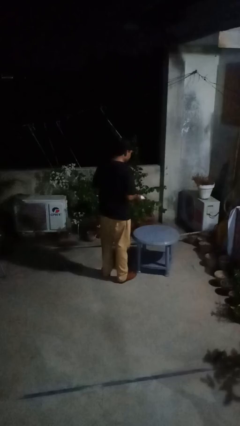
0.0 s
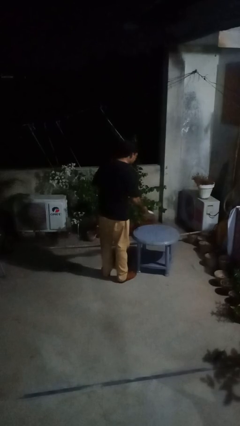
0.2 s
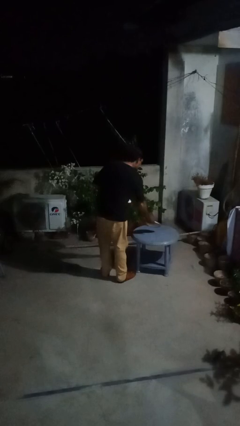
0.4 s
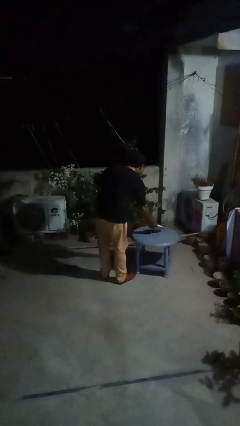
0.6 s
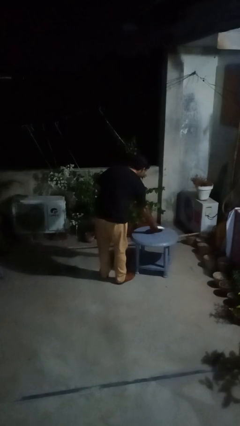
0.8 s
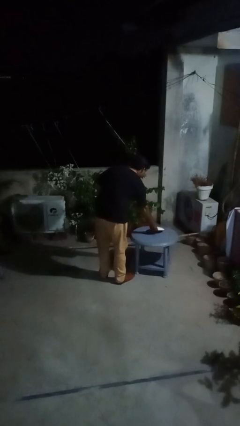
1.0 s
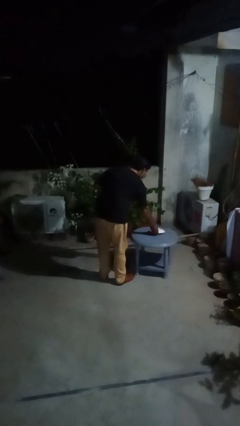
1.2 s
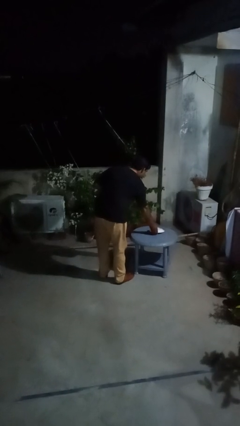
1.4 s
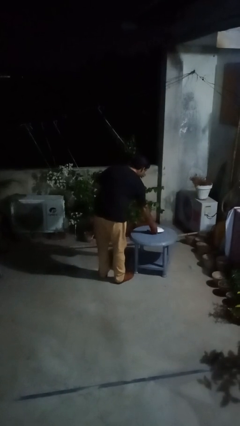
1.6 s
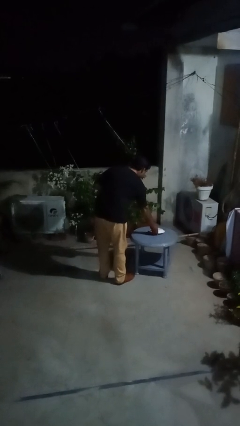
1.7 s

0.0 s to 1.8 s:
person sets table

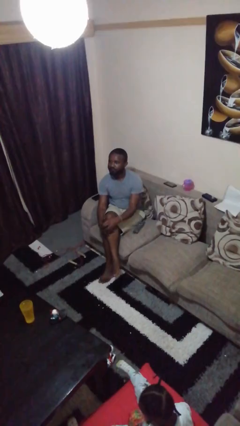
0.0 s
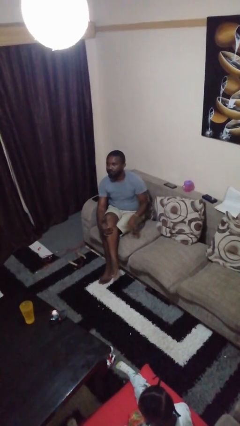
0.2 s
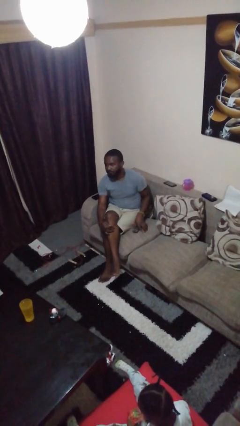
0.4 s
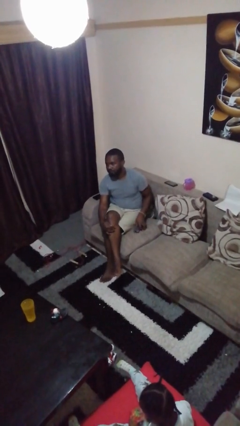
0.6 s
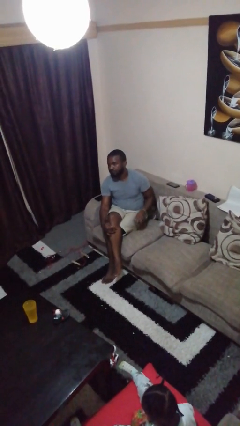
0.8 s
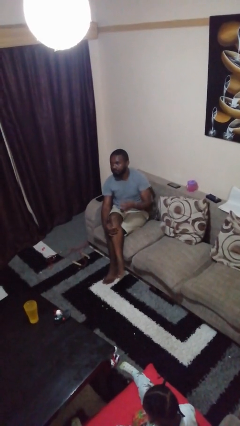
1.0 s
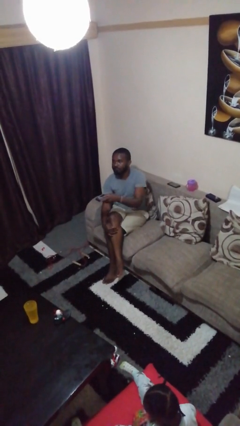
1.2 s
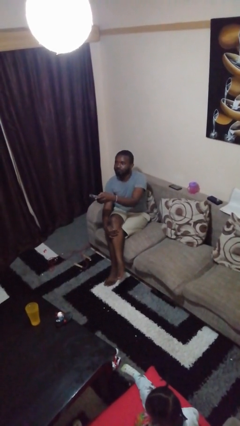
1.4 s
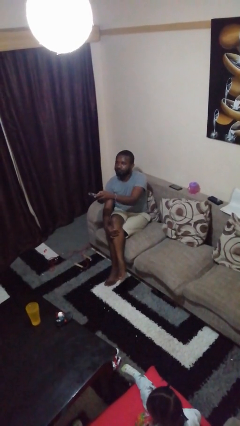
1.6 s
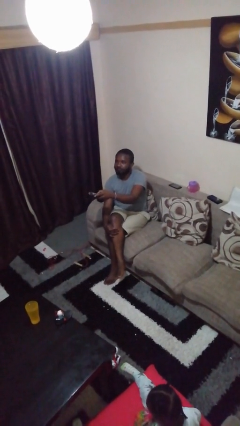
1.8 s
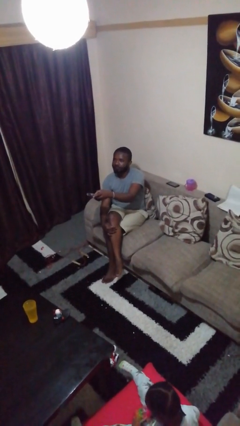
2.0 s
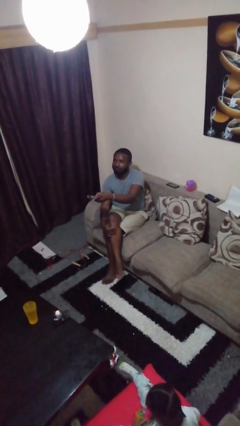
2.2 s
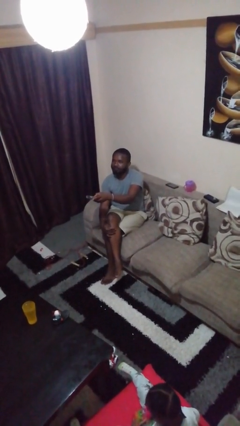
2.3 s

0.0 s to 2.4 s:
person uses television remote

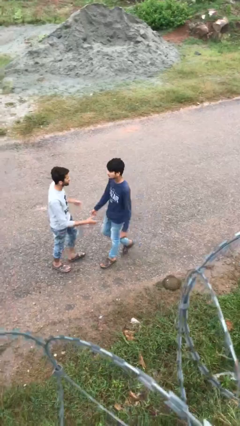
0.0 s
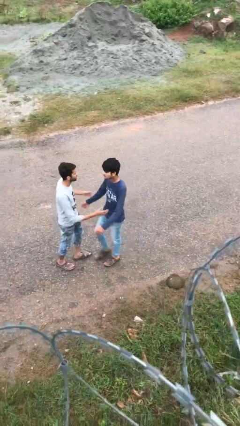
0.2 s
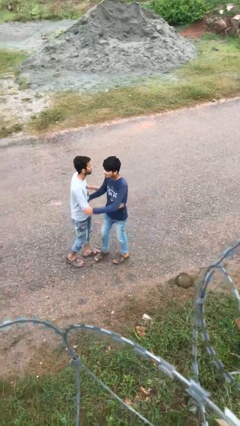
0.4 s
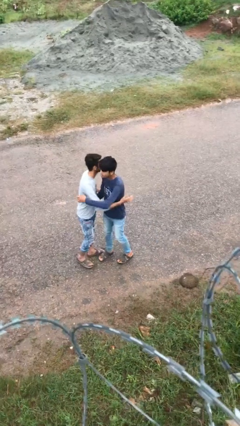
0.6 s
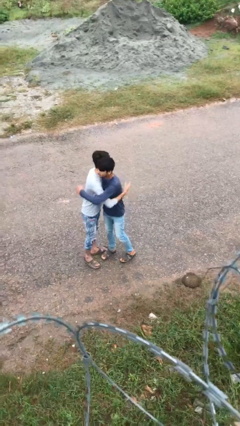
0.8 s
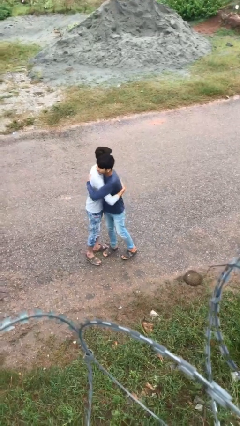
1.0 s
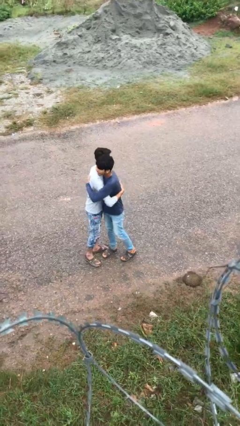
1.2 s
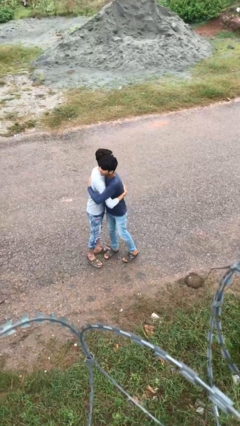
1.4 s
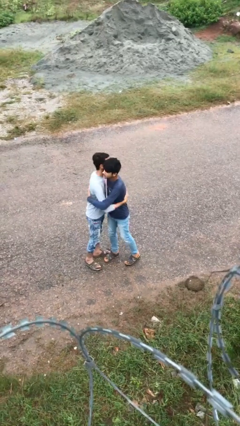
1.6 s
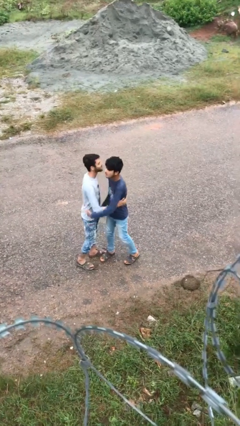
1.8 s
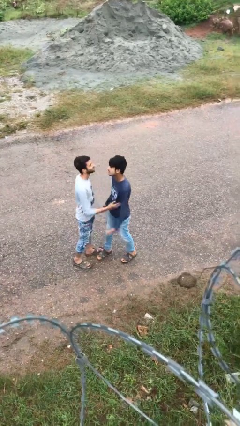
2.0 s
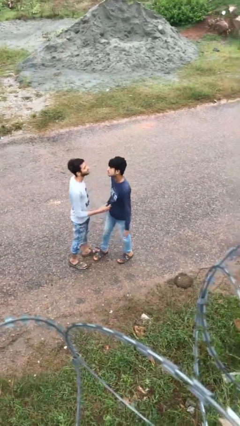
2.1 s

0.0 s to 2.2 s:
person embraces person

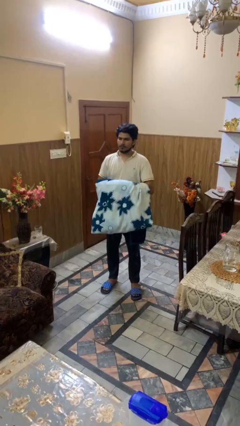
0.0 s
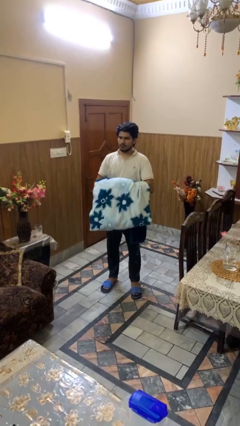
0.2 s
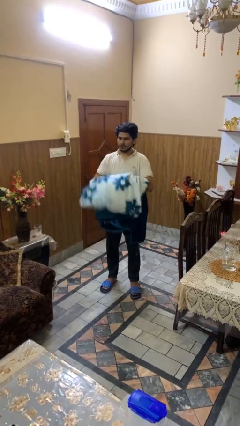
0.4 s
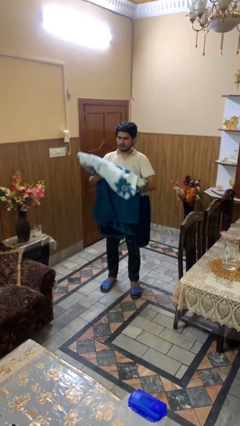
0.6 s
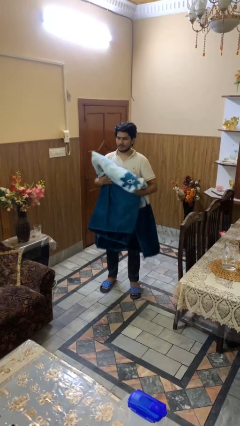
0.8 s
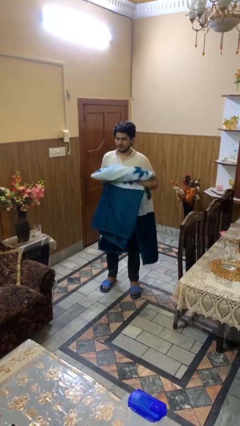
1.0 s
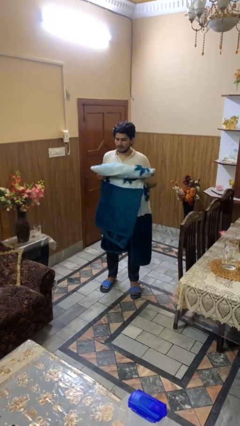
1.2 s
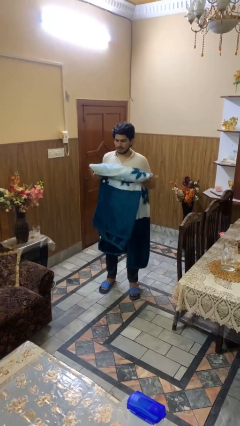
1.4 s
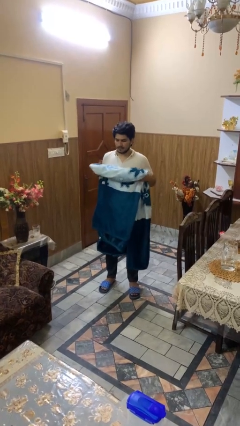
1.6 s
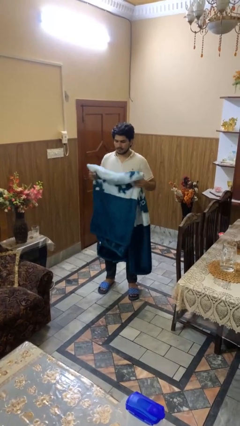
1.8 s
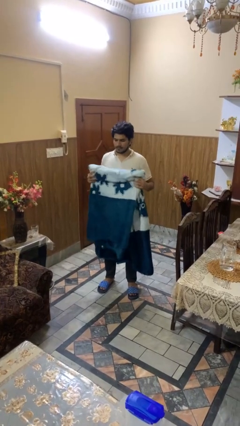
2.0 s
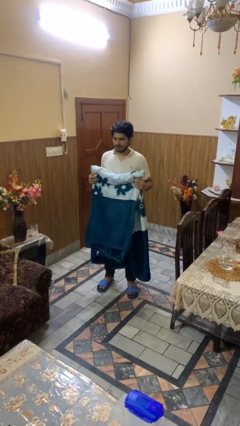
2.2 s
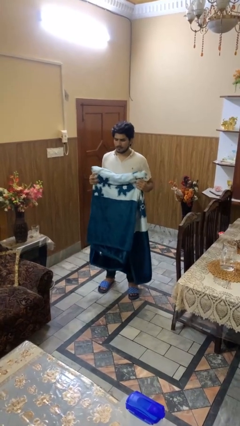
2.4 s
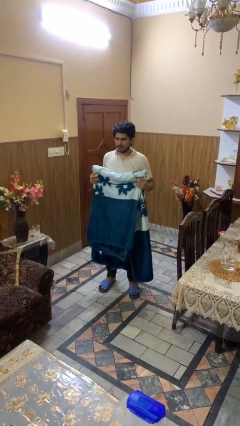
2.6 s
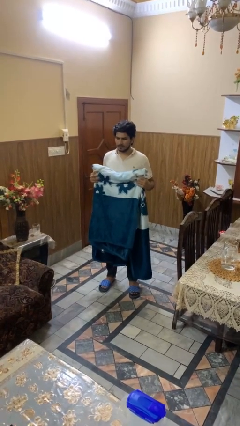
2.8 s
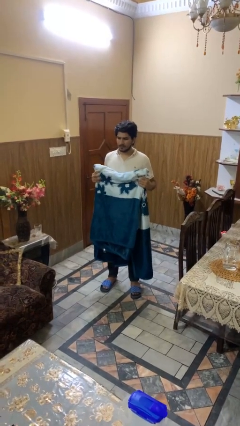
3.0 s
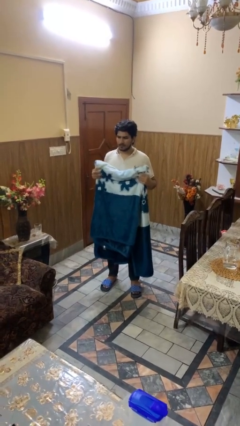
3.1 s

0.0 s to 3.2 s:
person unfolds blanket

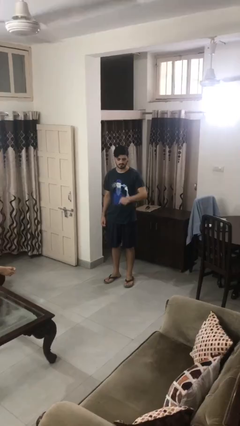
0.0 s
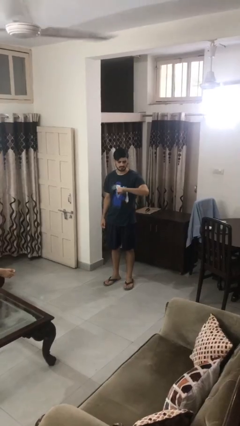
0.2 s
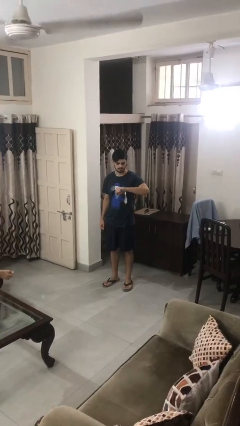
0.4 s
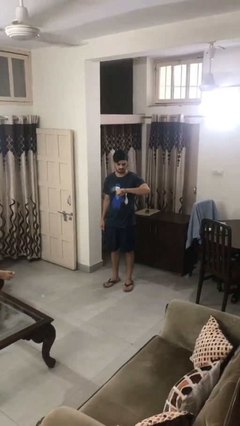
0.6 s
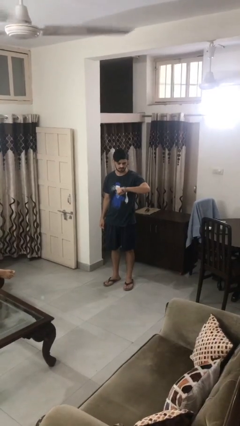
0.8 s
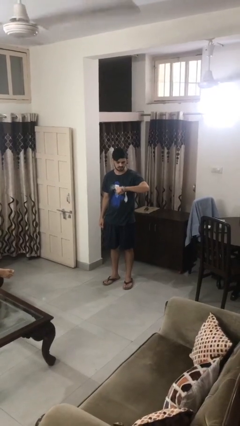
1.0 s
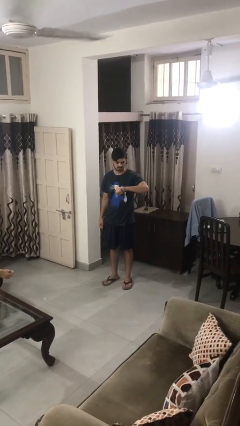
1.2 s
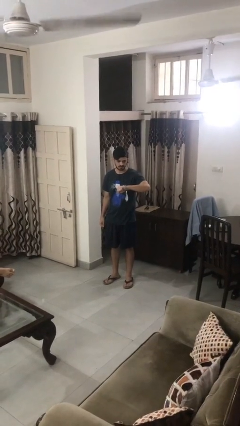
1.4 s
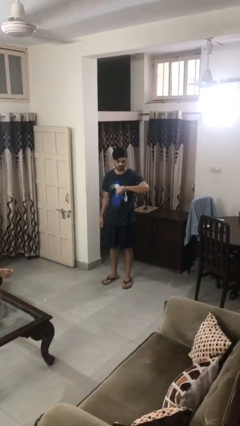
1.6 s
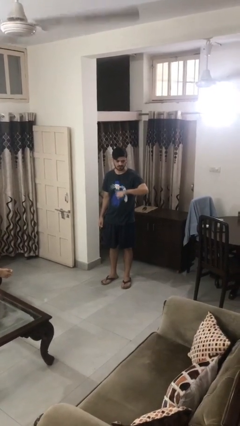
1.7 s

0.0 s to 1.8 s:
person looks at wristwatch

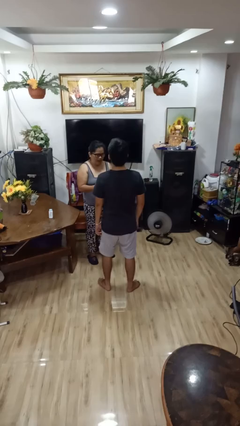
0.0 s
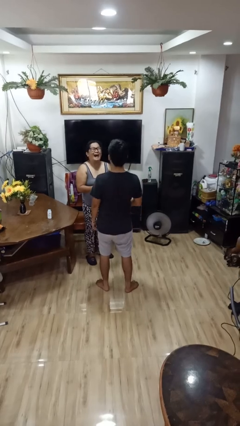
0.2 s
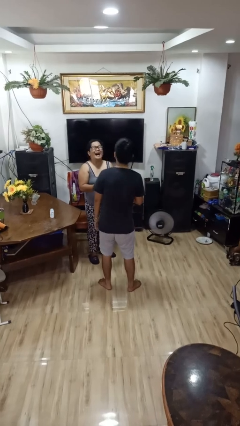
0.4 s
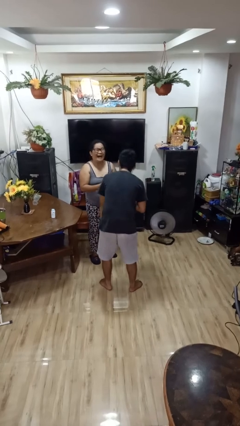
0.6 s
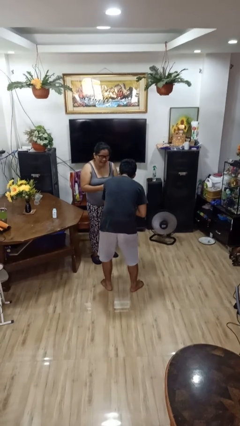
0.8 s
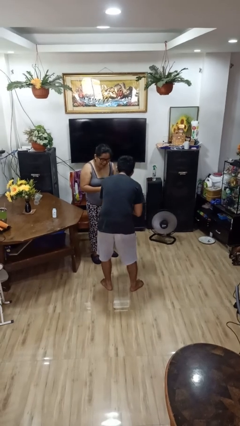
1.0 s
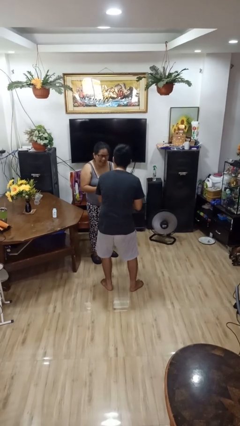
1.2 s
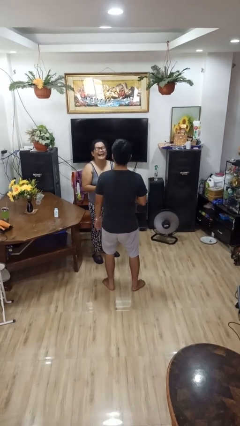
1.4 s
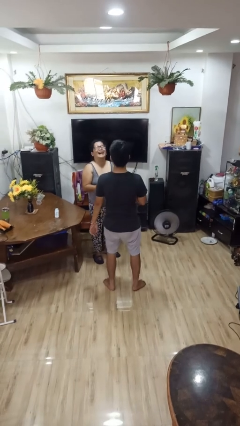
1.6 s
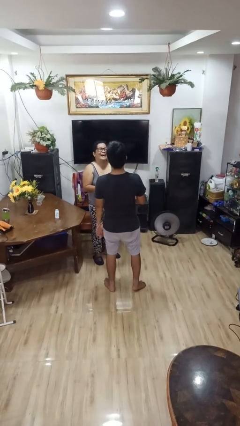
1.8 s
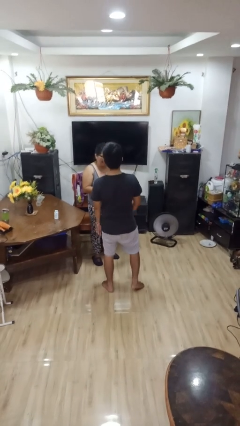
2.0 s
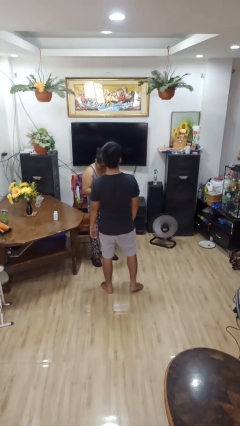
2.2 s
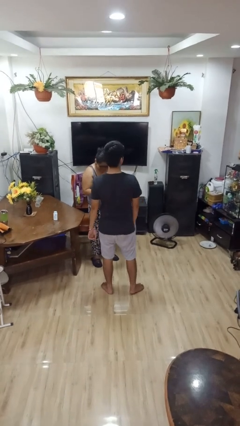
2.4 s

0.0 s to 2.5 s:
person laughs with person

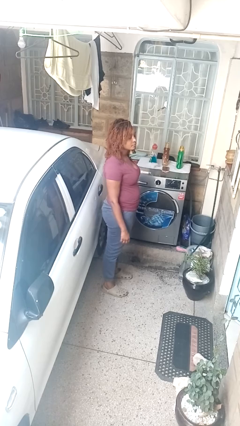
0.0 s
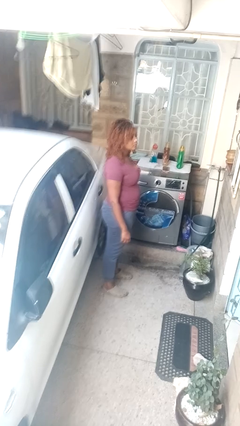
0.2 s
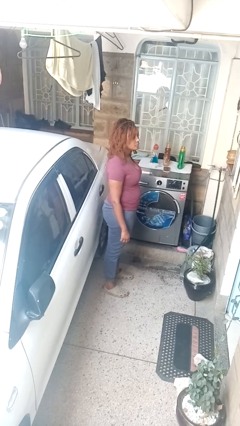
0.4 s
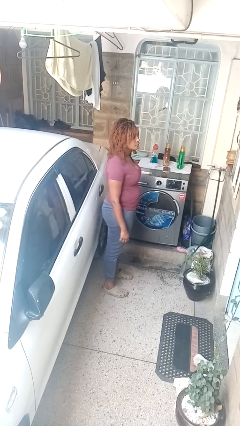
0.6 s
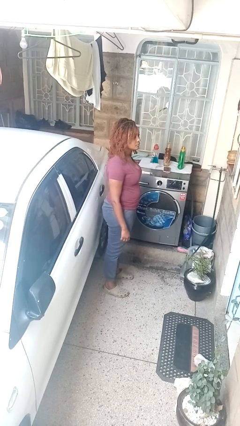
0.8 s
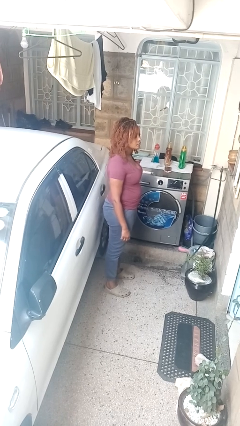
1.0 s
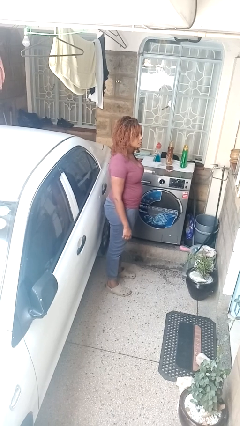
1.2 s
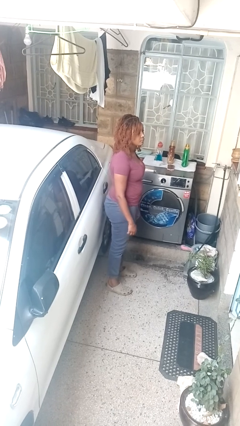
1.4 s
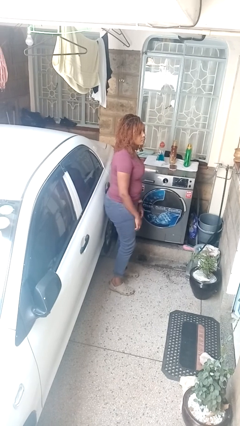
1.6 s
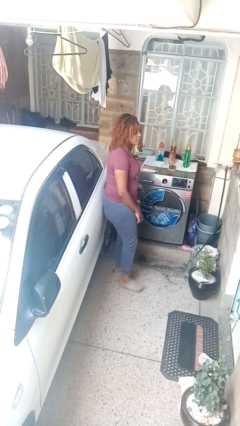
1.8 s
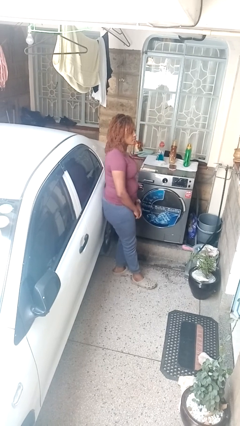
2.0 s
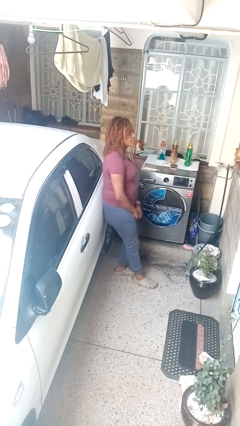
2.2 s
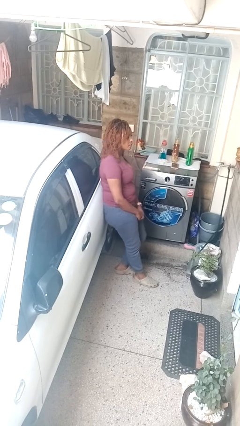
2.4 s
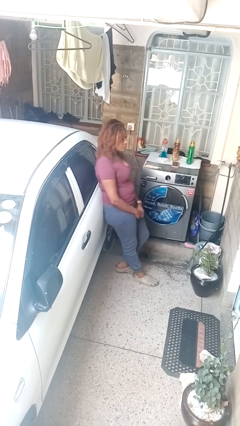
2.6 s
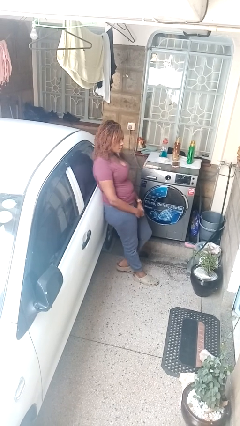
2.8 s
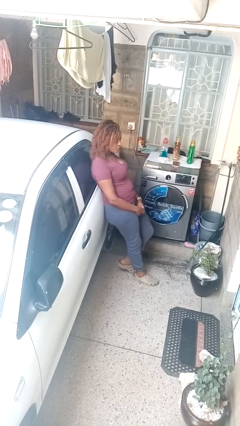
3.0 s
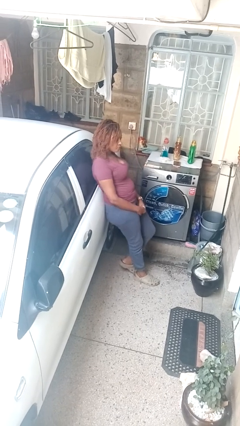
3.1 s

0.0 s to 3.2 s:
person leans against car

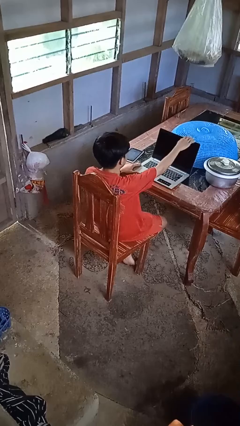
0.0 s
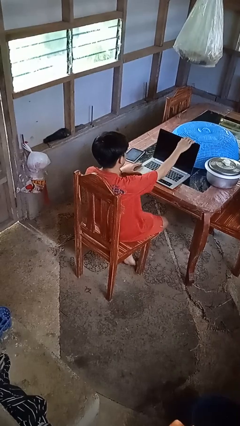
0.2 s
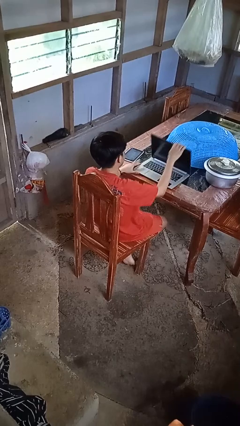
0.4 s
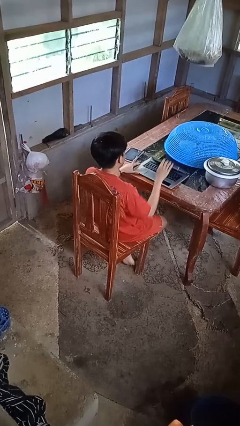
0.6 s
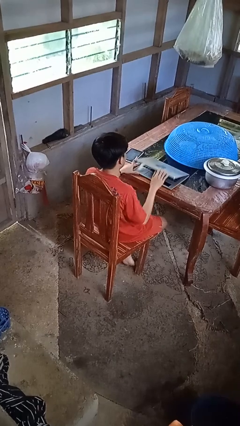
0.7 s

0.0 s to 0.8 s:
person closes laptop
